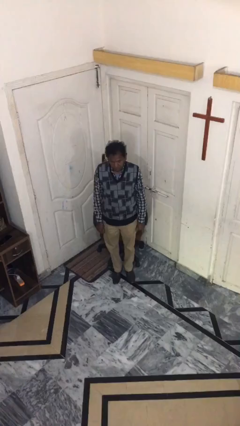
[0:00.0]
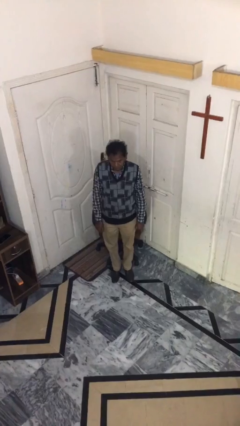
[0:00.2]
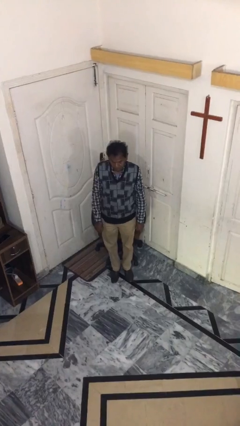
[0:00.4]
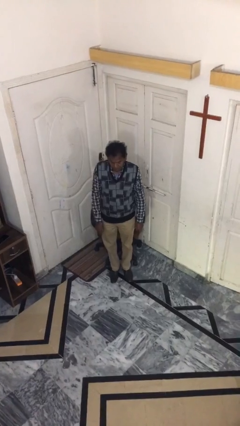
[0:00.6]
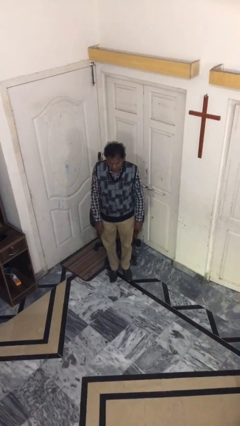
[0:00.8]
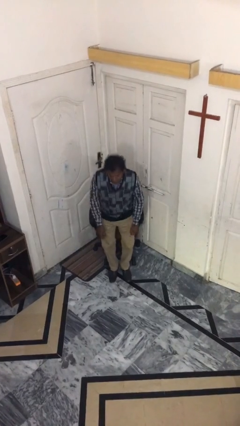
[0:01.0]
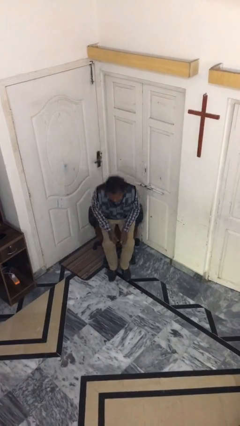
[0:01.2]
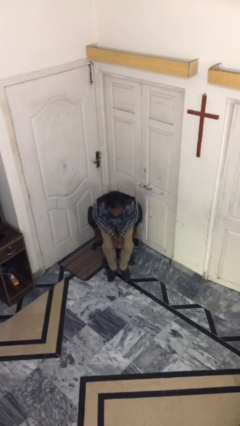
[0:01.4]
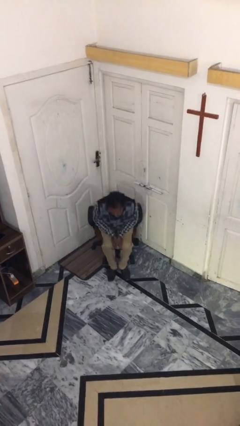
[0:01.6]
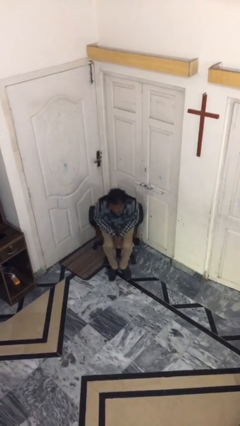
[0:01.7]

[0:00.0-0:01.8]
person sits down

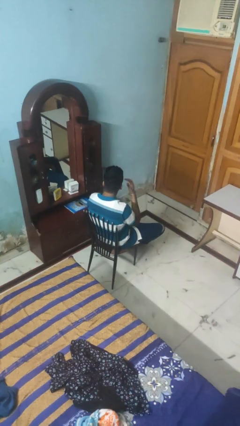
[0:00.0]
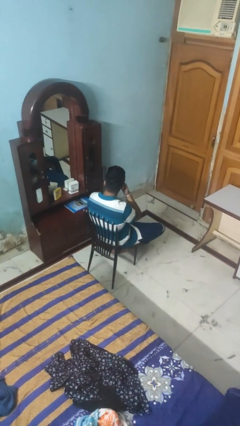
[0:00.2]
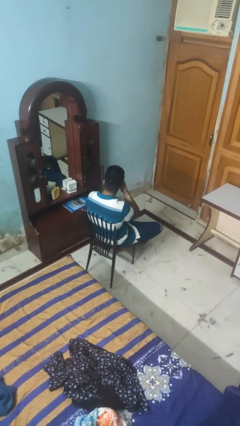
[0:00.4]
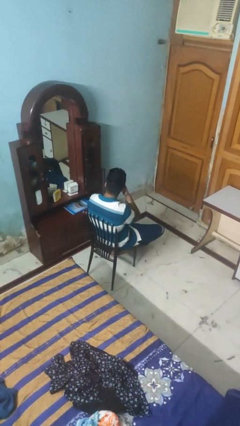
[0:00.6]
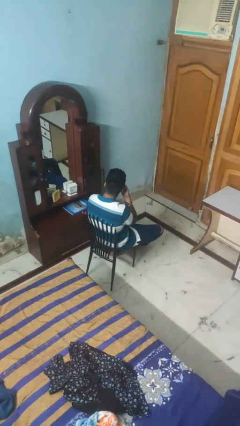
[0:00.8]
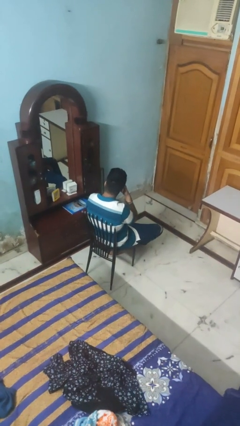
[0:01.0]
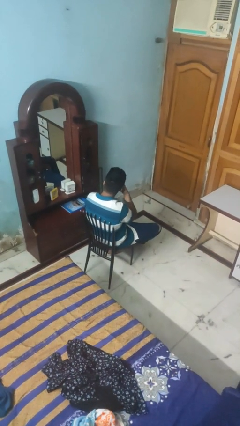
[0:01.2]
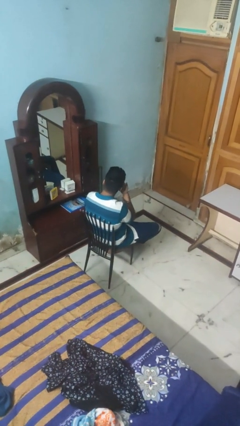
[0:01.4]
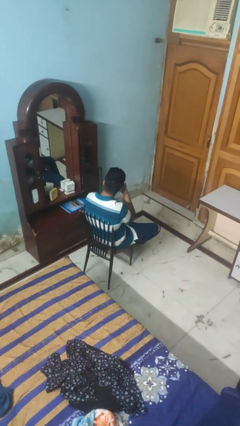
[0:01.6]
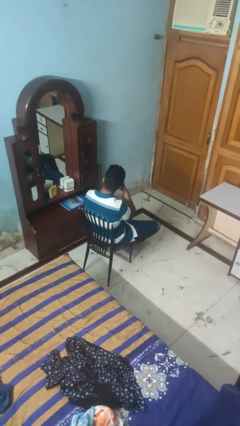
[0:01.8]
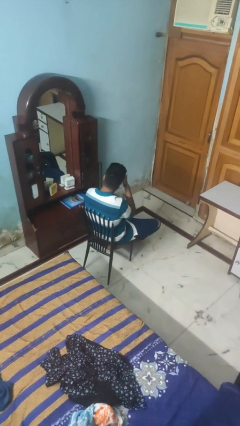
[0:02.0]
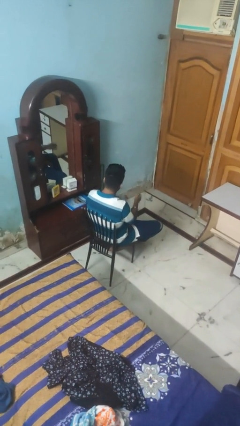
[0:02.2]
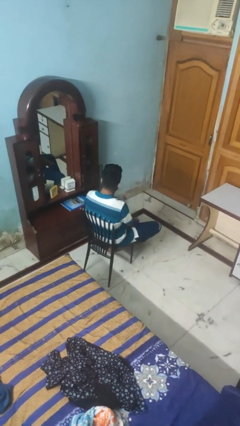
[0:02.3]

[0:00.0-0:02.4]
person rubs eyes

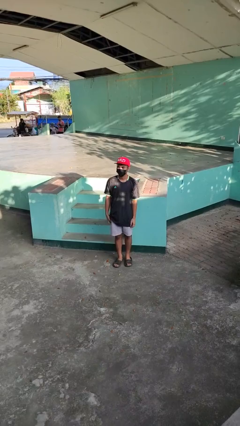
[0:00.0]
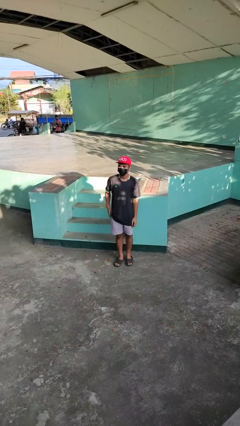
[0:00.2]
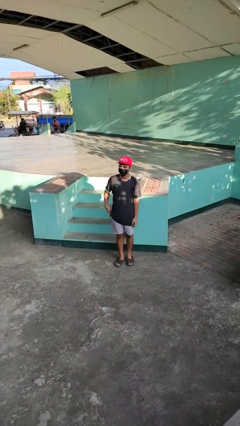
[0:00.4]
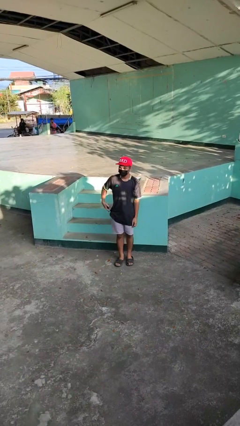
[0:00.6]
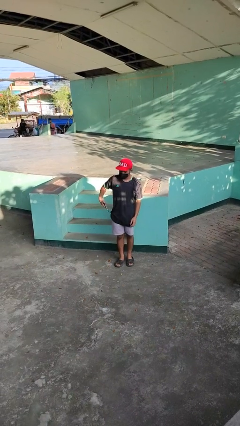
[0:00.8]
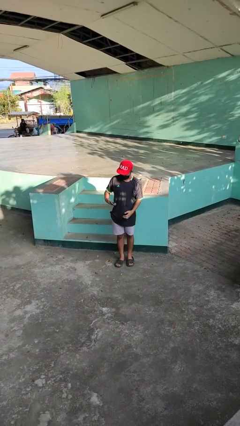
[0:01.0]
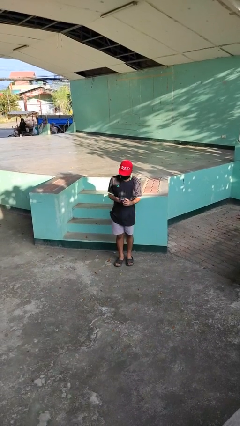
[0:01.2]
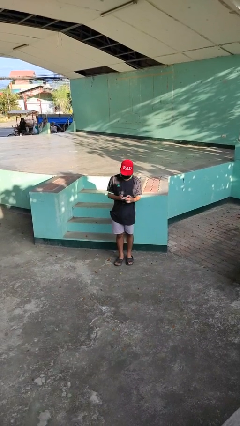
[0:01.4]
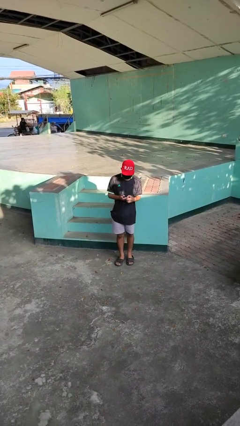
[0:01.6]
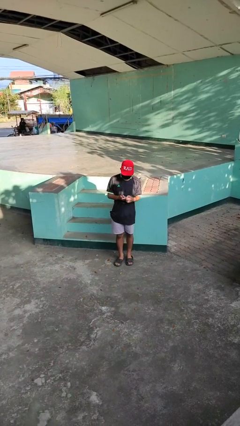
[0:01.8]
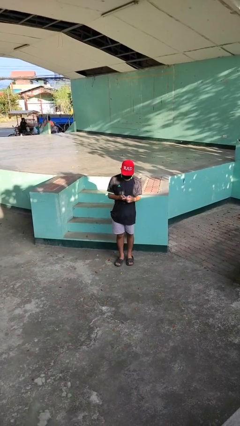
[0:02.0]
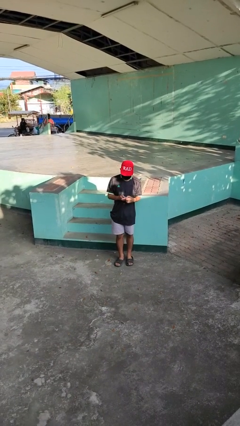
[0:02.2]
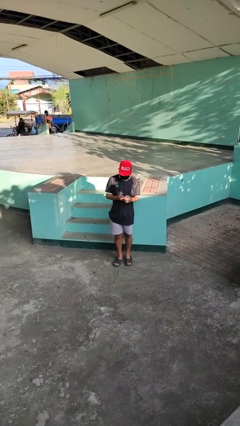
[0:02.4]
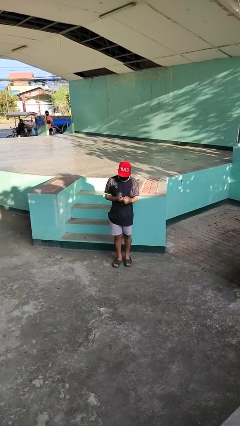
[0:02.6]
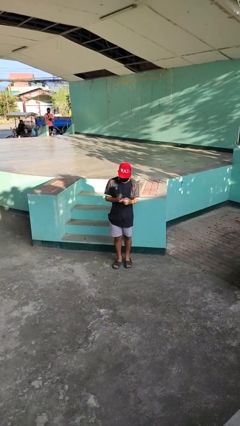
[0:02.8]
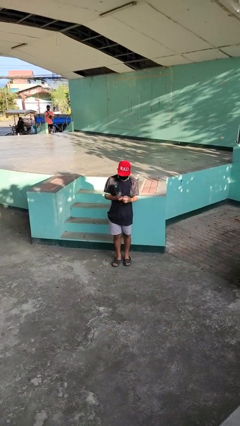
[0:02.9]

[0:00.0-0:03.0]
person takes phone from pocket

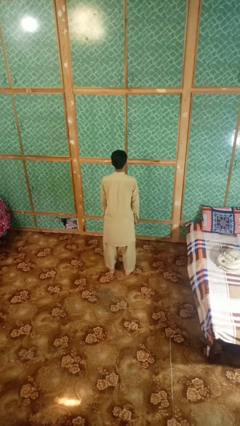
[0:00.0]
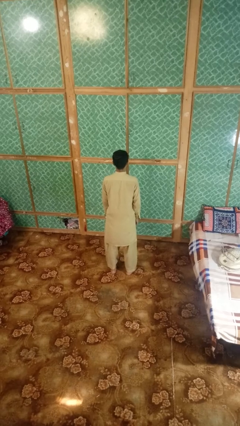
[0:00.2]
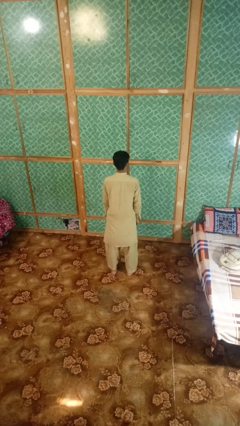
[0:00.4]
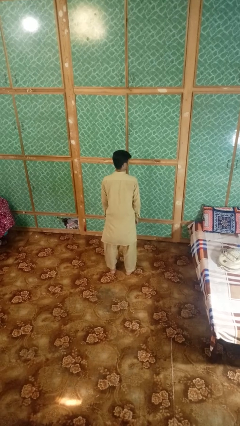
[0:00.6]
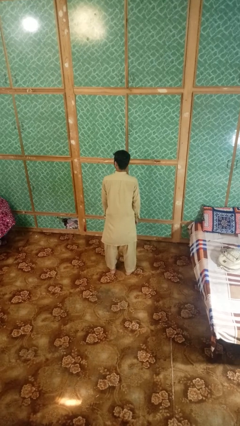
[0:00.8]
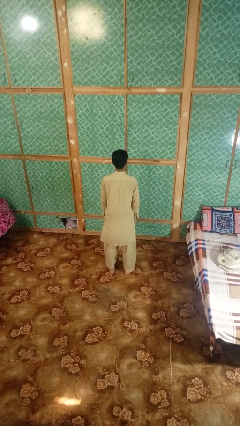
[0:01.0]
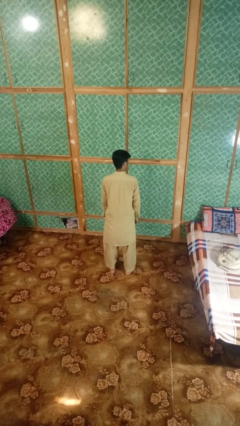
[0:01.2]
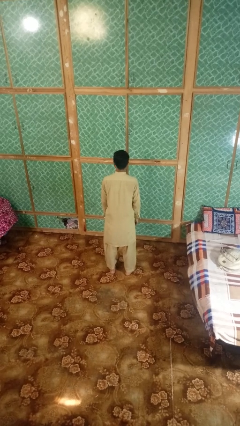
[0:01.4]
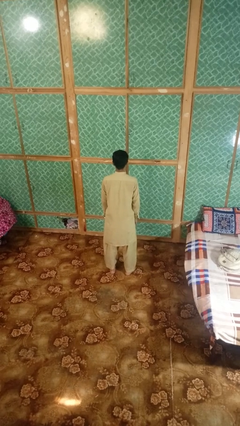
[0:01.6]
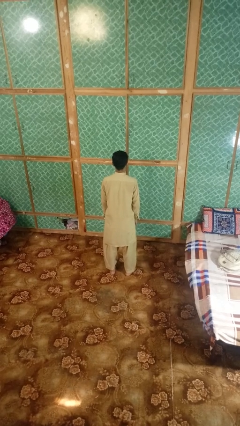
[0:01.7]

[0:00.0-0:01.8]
person nods head

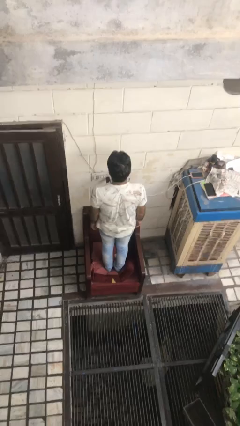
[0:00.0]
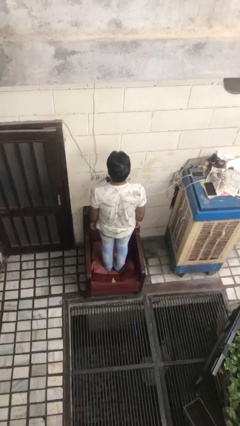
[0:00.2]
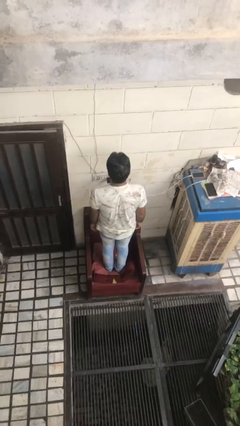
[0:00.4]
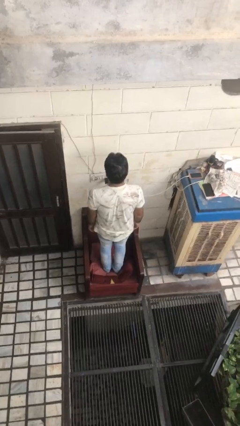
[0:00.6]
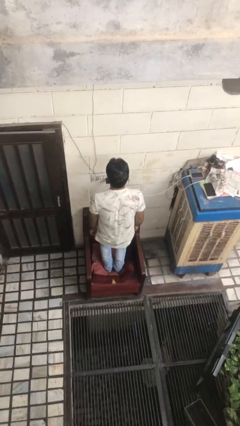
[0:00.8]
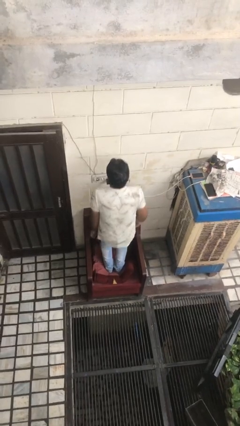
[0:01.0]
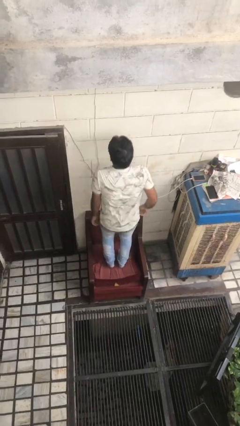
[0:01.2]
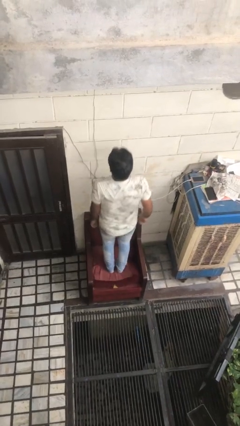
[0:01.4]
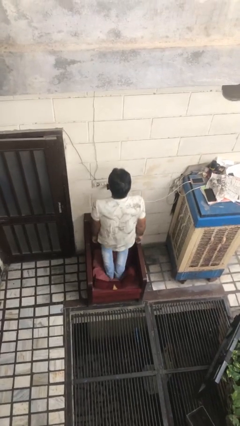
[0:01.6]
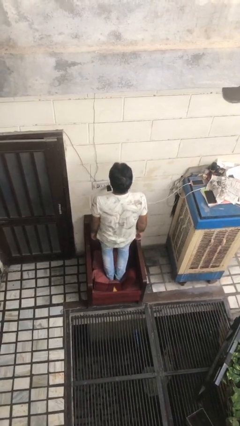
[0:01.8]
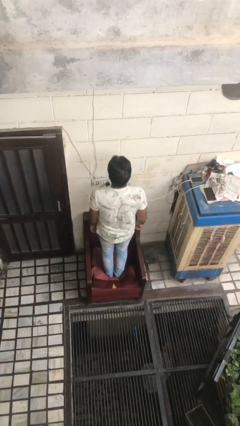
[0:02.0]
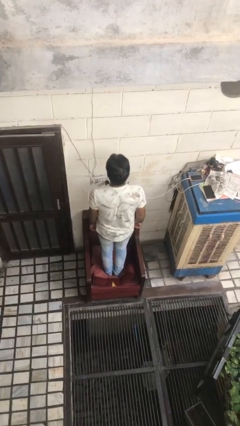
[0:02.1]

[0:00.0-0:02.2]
person jumps on couch

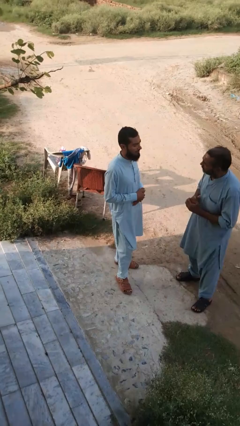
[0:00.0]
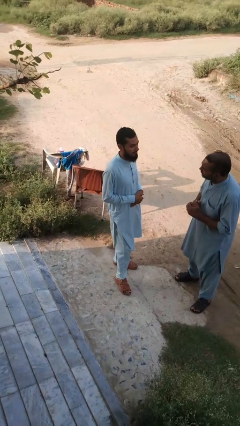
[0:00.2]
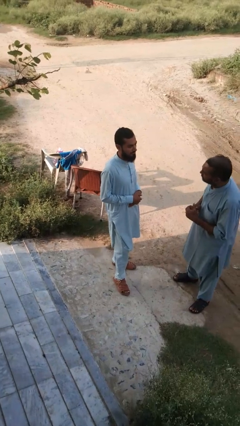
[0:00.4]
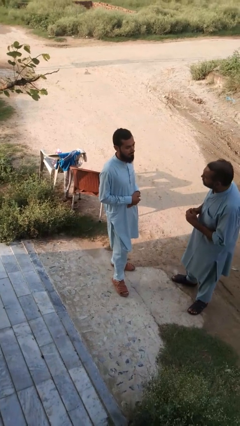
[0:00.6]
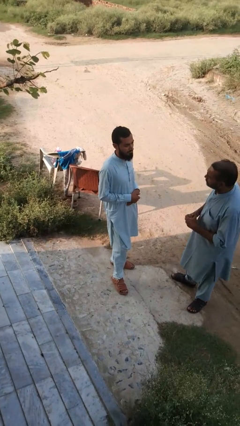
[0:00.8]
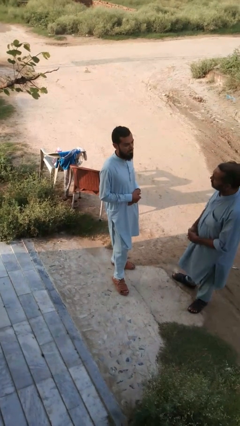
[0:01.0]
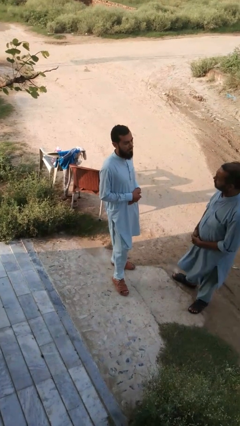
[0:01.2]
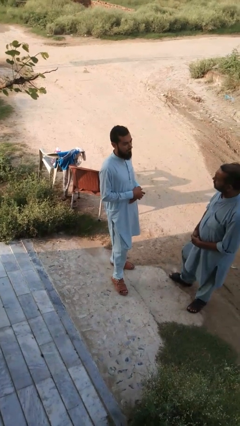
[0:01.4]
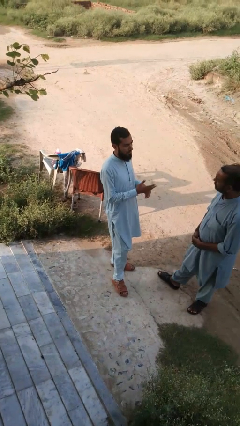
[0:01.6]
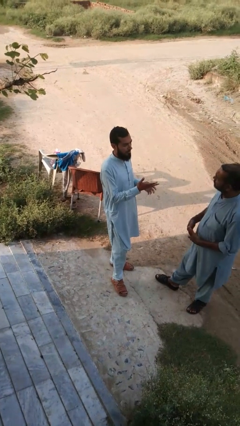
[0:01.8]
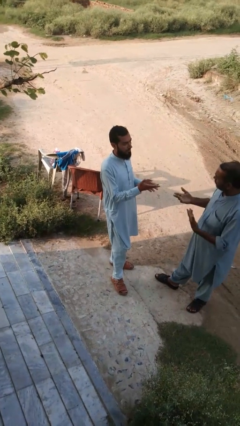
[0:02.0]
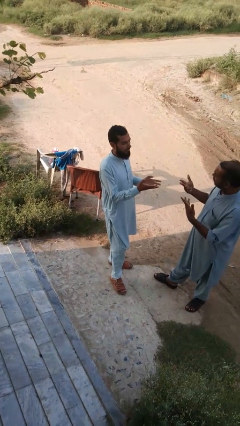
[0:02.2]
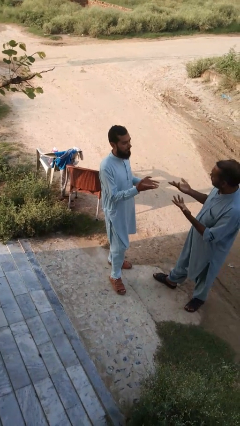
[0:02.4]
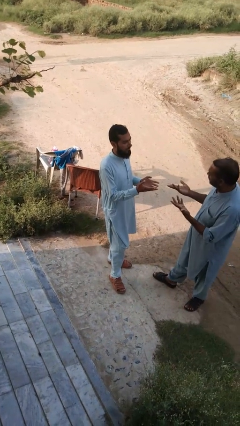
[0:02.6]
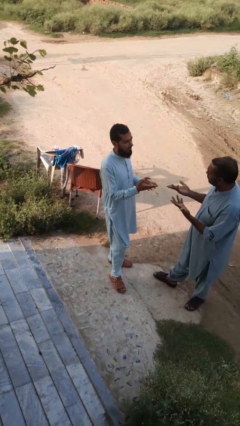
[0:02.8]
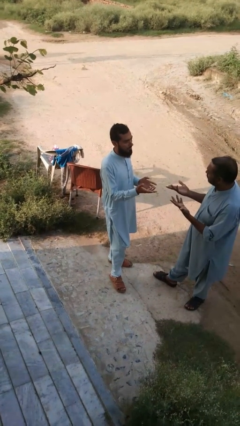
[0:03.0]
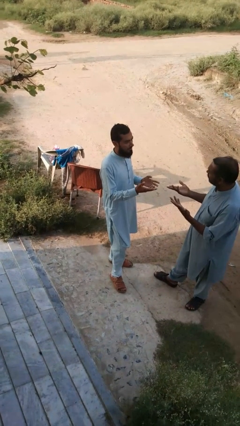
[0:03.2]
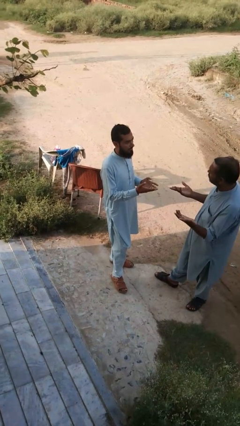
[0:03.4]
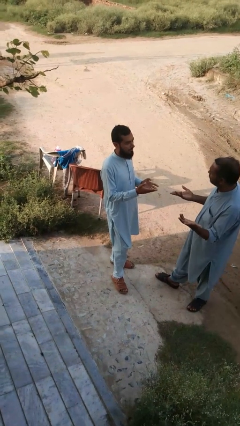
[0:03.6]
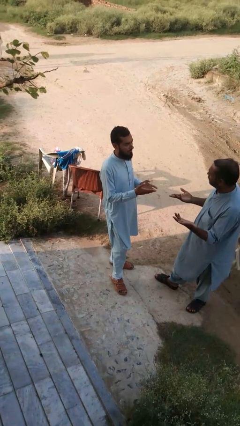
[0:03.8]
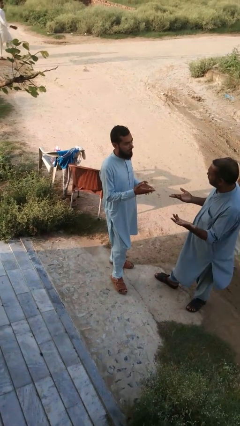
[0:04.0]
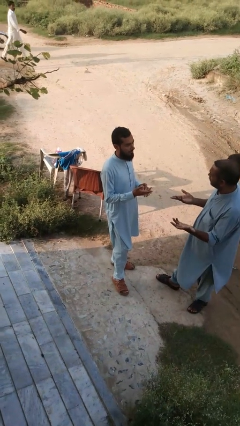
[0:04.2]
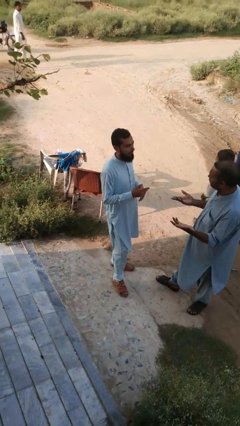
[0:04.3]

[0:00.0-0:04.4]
person talks to person

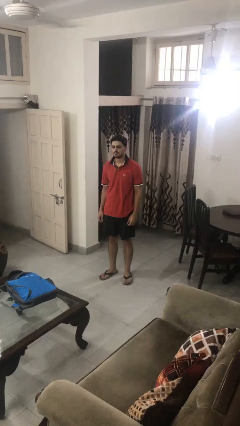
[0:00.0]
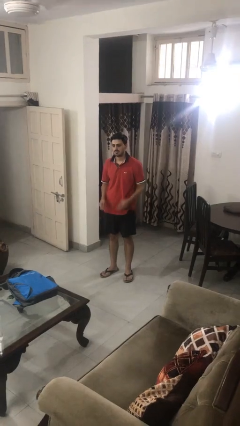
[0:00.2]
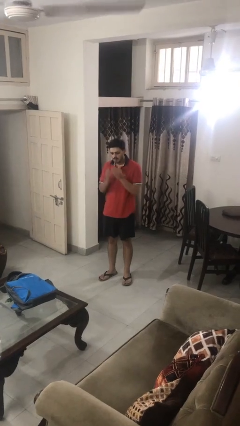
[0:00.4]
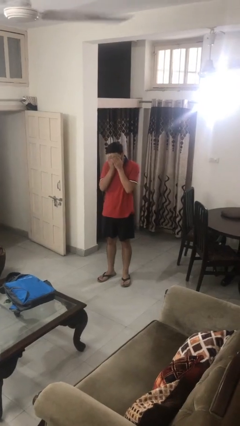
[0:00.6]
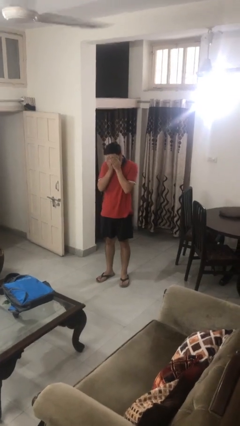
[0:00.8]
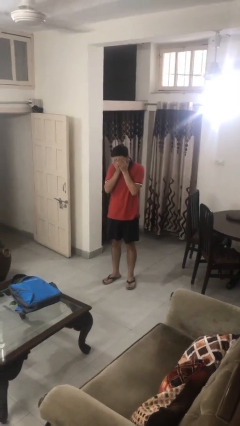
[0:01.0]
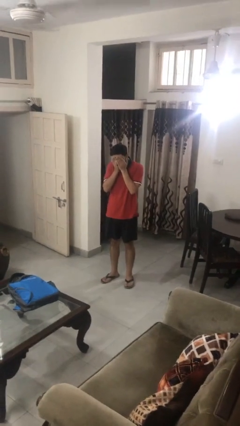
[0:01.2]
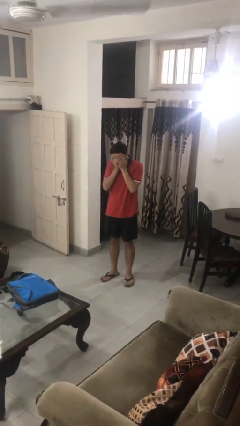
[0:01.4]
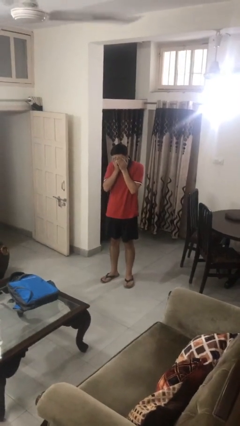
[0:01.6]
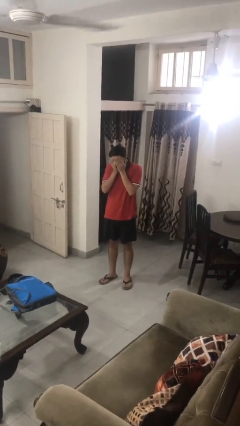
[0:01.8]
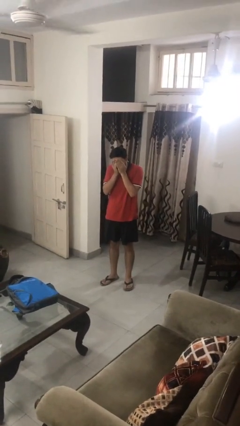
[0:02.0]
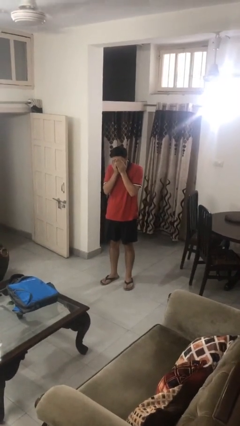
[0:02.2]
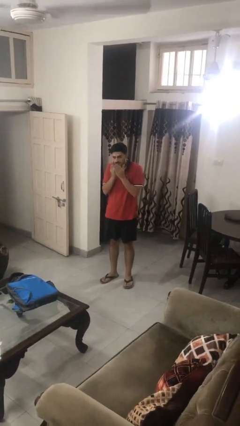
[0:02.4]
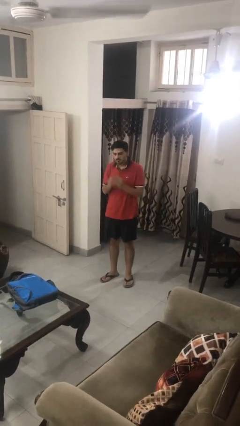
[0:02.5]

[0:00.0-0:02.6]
person covers face with hands
